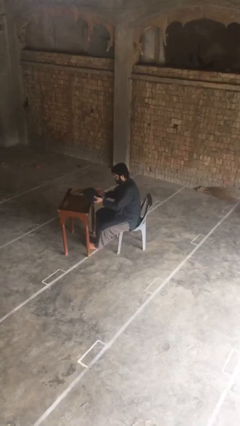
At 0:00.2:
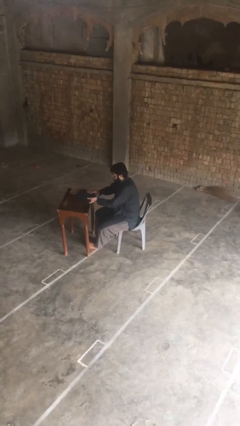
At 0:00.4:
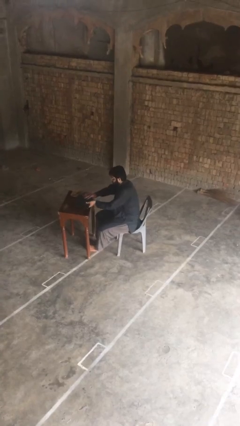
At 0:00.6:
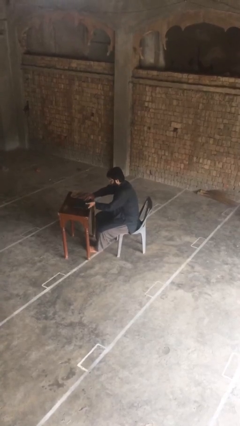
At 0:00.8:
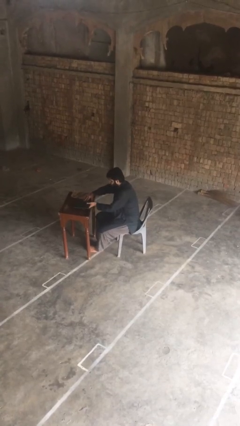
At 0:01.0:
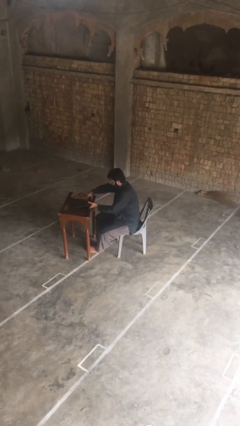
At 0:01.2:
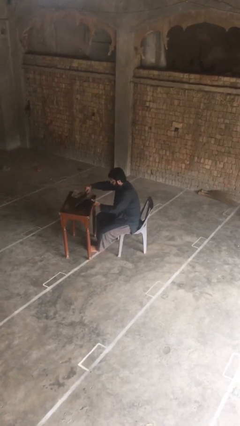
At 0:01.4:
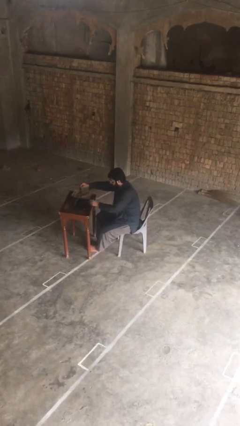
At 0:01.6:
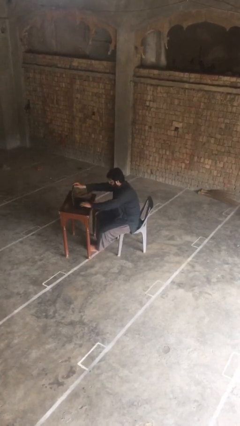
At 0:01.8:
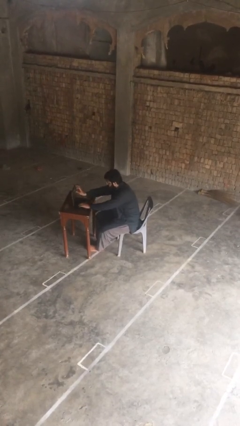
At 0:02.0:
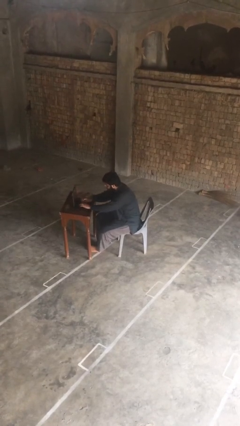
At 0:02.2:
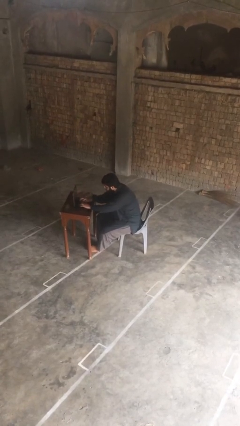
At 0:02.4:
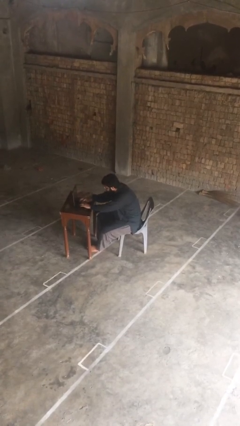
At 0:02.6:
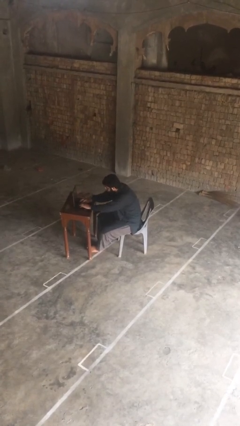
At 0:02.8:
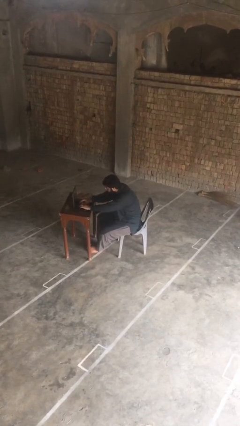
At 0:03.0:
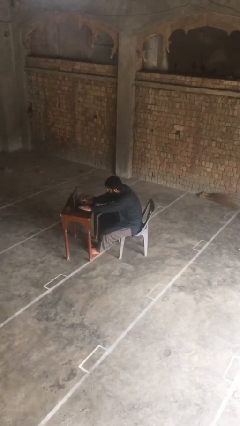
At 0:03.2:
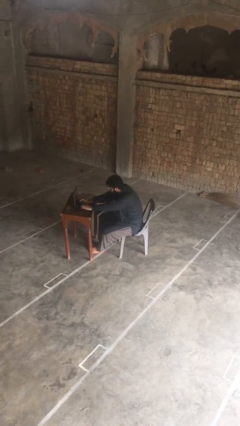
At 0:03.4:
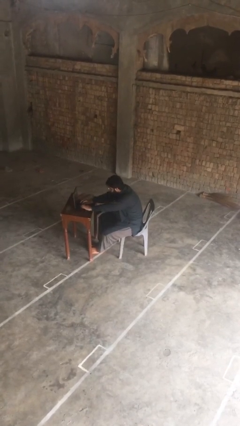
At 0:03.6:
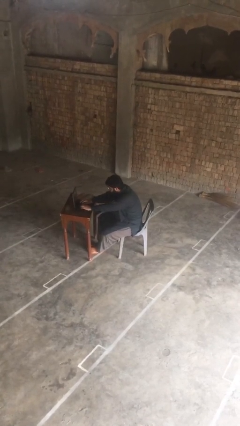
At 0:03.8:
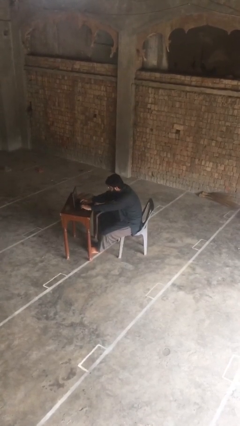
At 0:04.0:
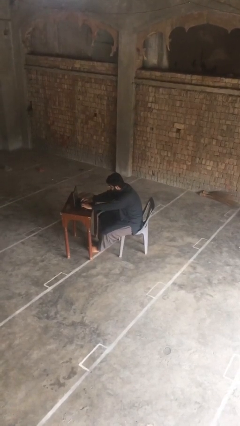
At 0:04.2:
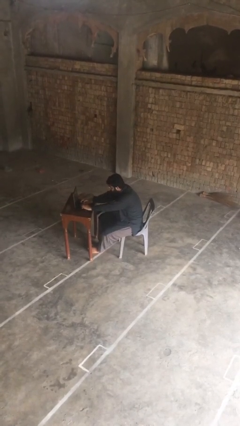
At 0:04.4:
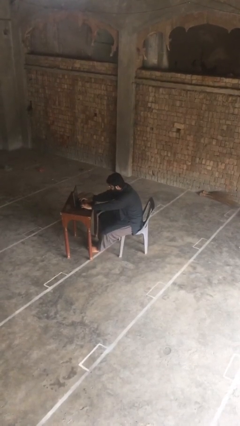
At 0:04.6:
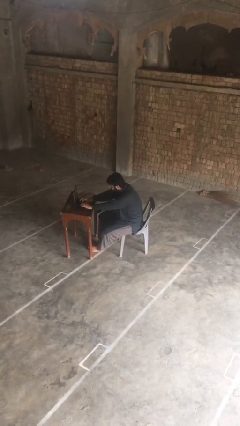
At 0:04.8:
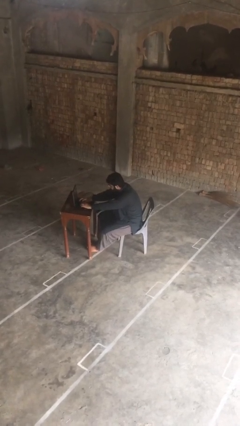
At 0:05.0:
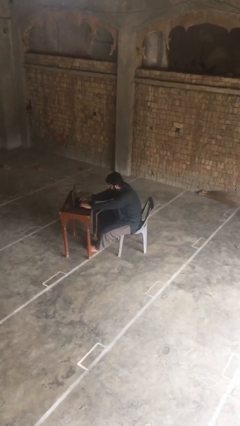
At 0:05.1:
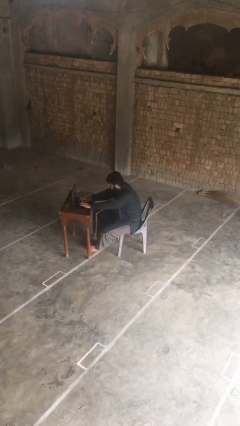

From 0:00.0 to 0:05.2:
person interacts with laptop

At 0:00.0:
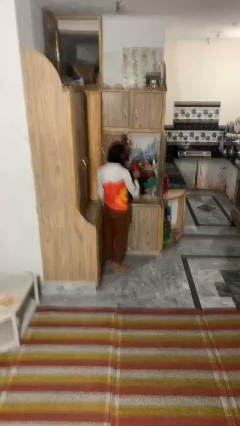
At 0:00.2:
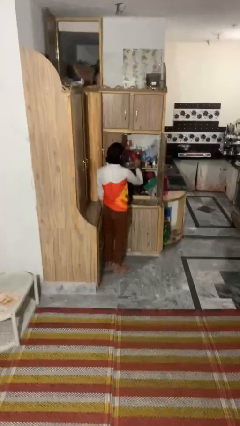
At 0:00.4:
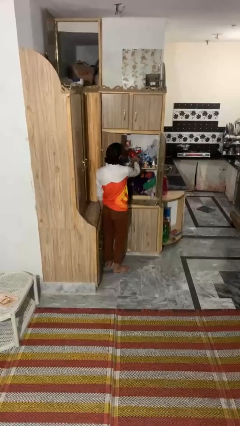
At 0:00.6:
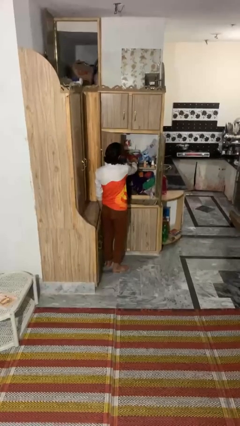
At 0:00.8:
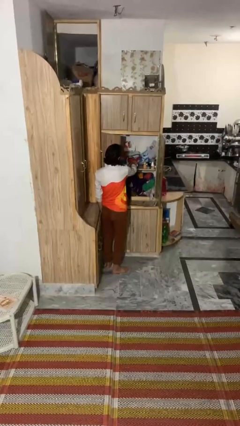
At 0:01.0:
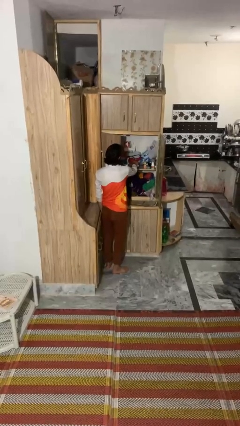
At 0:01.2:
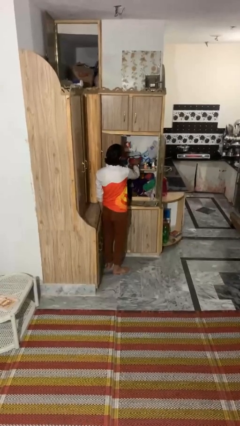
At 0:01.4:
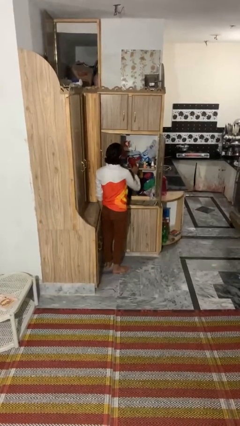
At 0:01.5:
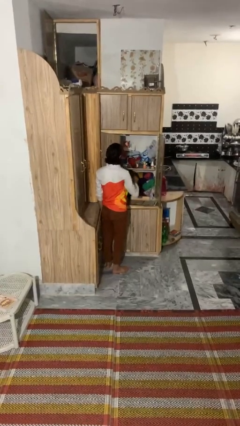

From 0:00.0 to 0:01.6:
person puts down object into cabinet

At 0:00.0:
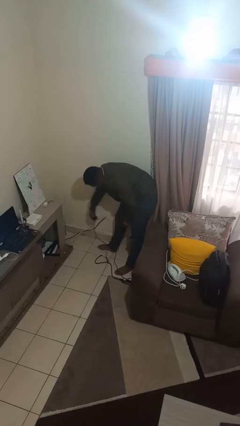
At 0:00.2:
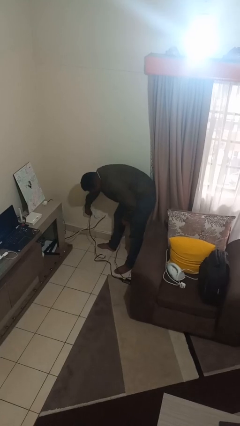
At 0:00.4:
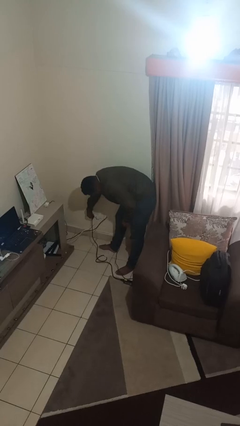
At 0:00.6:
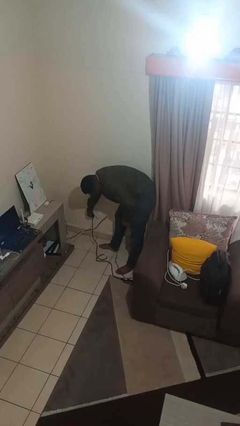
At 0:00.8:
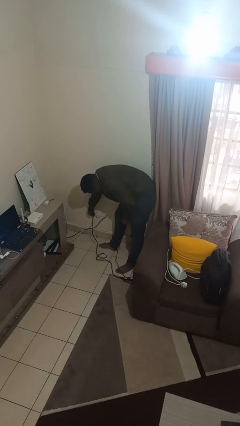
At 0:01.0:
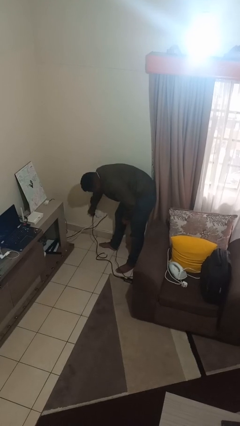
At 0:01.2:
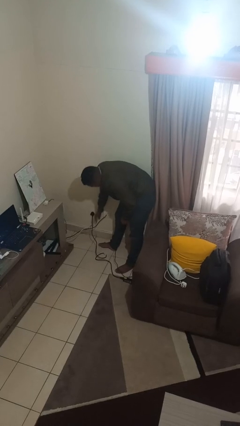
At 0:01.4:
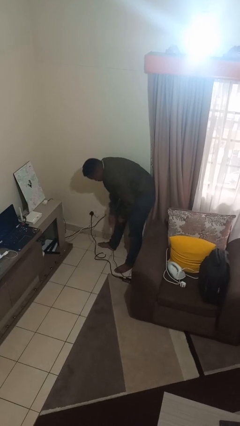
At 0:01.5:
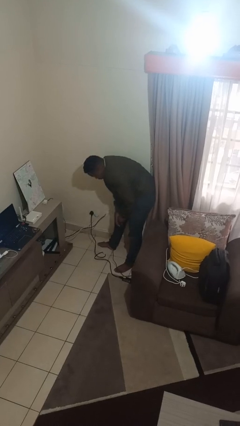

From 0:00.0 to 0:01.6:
person plugs into electrical socket

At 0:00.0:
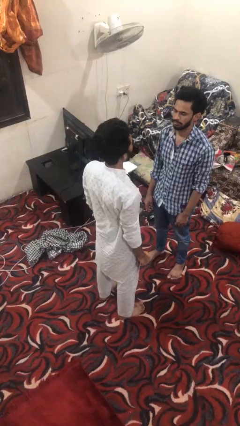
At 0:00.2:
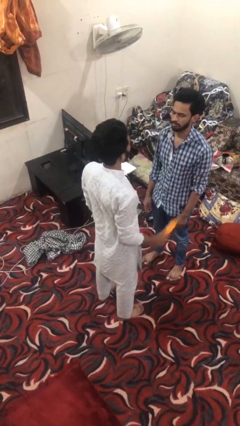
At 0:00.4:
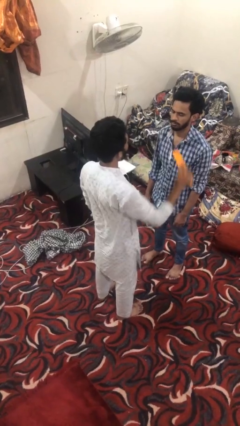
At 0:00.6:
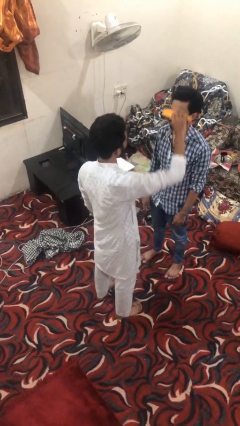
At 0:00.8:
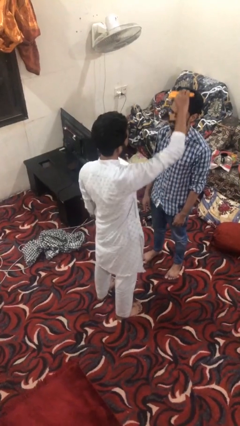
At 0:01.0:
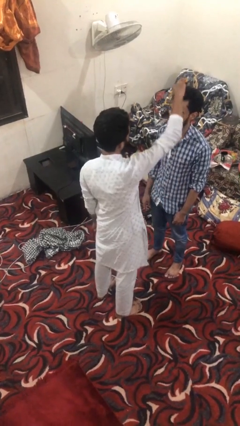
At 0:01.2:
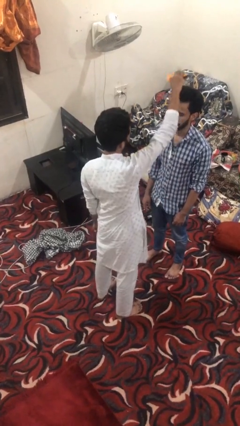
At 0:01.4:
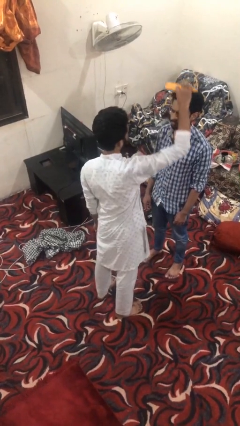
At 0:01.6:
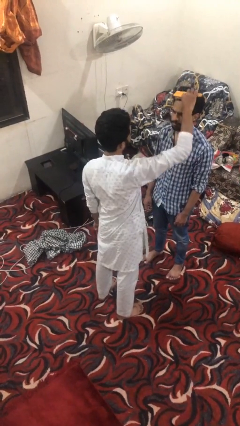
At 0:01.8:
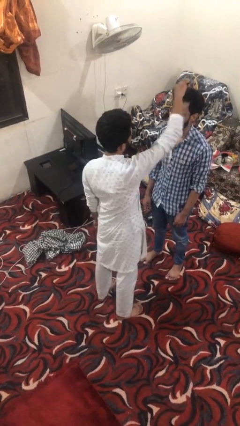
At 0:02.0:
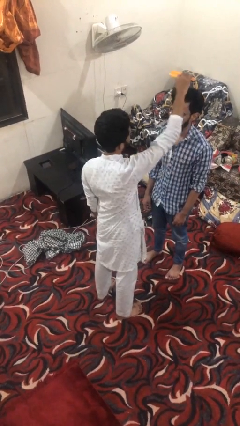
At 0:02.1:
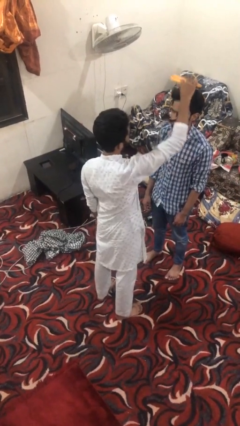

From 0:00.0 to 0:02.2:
person brushes hair of person

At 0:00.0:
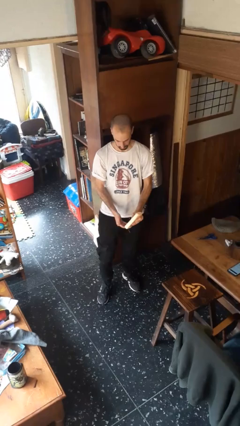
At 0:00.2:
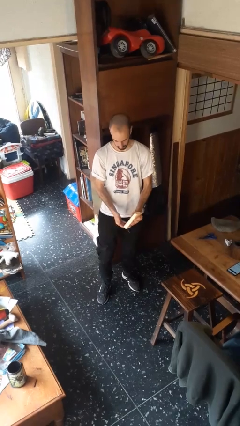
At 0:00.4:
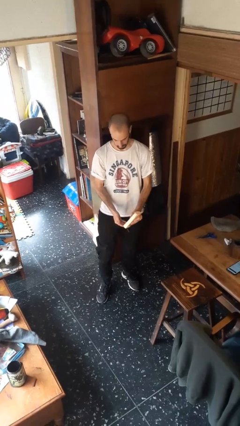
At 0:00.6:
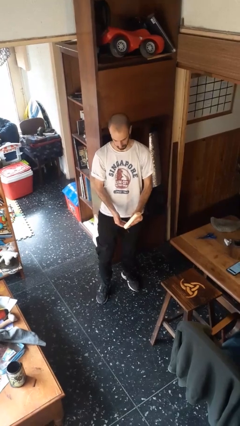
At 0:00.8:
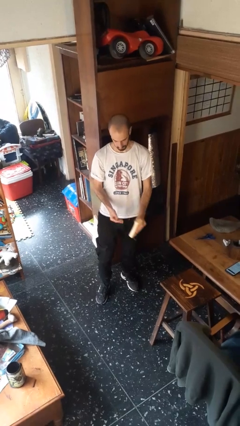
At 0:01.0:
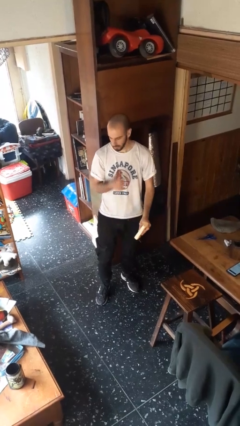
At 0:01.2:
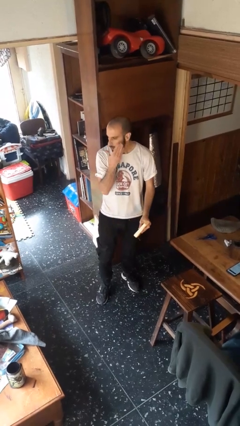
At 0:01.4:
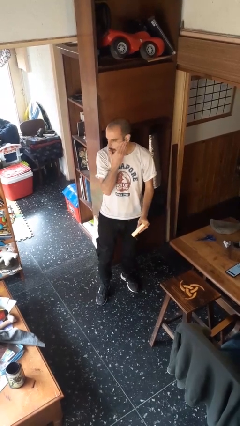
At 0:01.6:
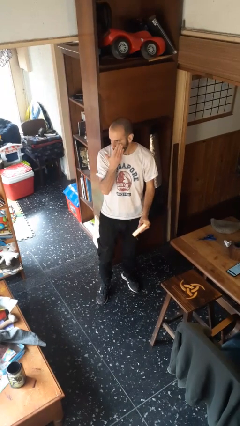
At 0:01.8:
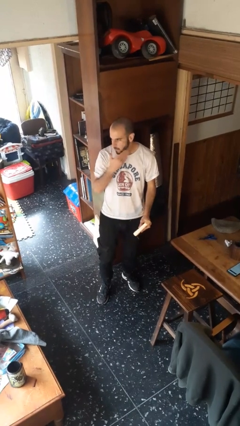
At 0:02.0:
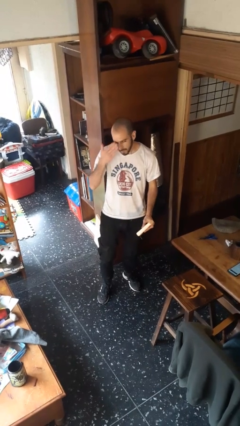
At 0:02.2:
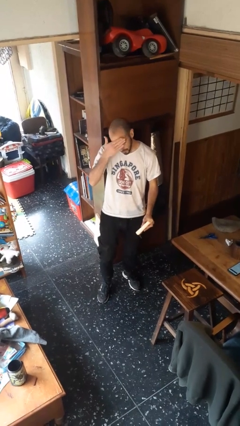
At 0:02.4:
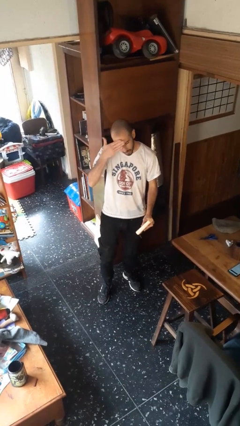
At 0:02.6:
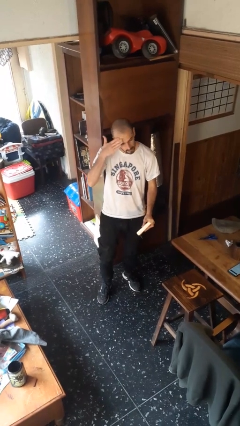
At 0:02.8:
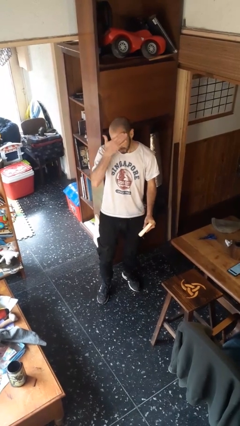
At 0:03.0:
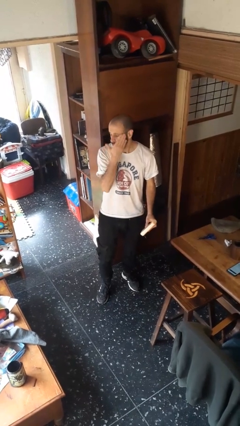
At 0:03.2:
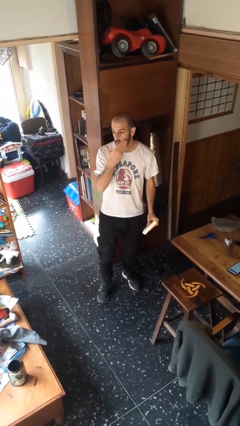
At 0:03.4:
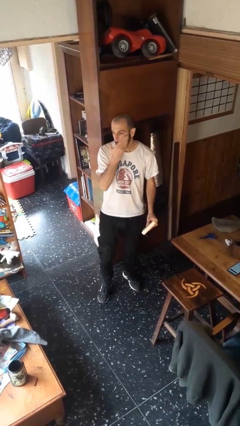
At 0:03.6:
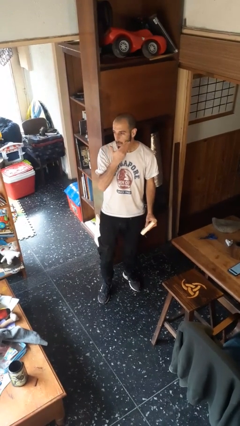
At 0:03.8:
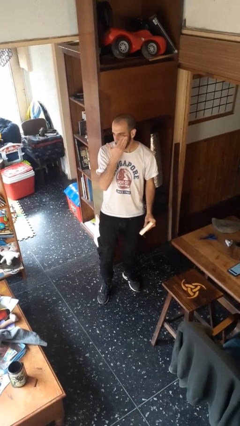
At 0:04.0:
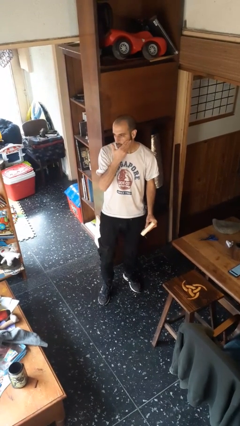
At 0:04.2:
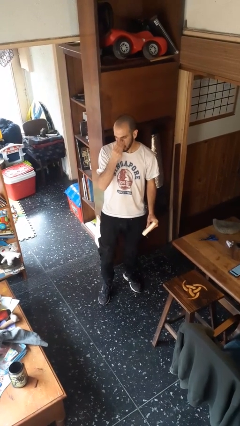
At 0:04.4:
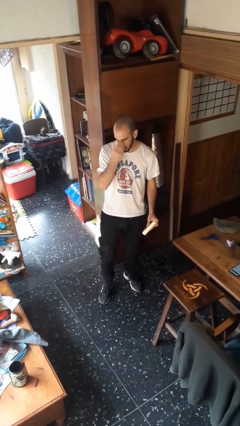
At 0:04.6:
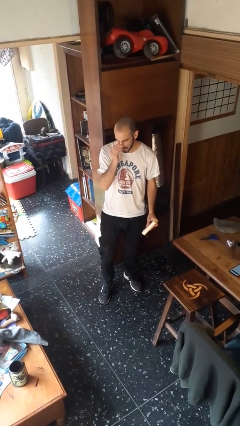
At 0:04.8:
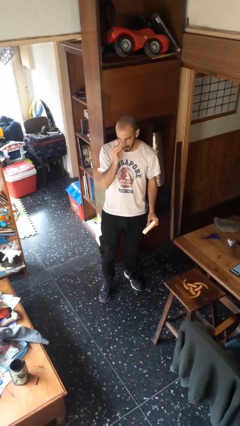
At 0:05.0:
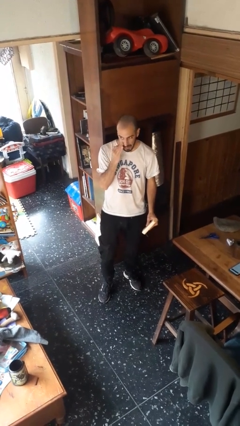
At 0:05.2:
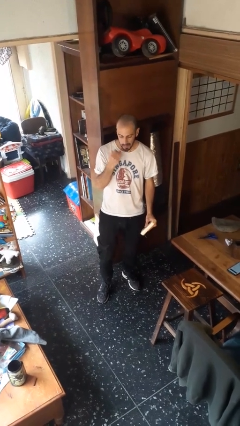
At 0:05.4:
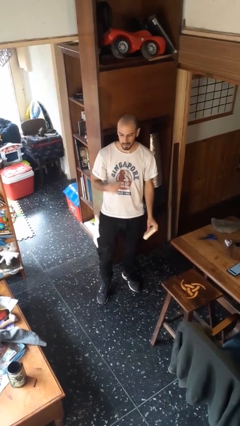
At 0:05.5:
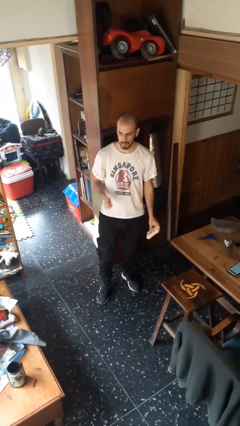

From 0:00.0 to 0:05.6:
person applies sunscreen

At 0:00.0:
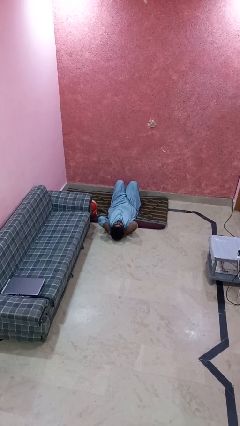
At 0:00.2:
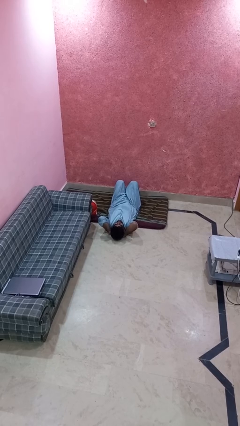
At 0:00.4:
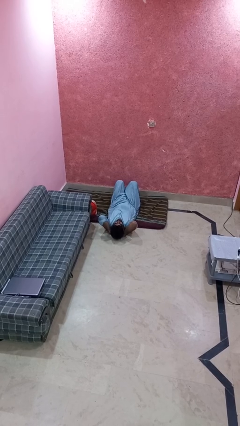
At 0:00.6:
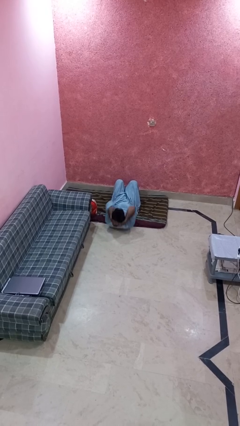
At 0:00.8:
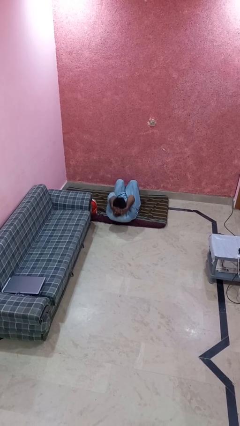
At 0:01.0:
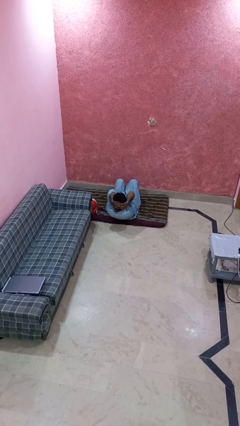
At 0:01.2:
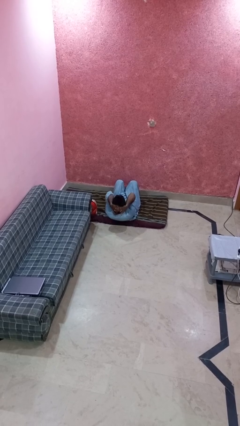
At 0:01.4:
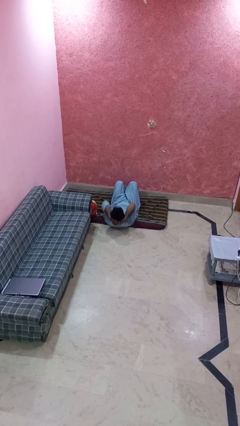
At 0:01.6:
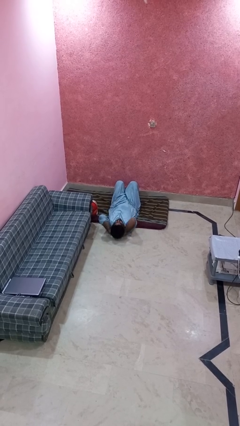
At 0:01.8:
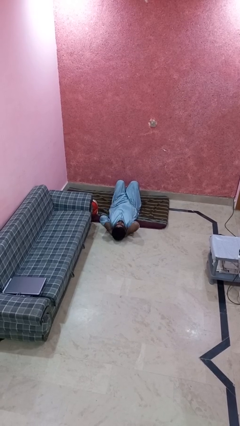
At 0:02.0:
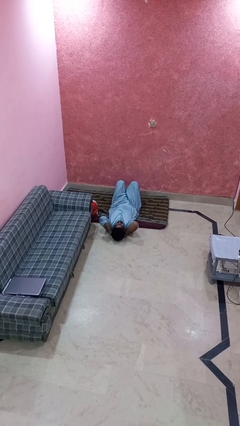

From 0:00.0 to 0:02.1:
person exercises with situp
